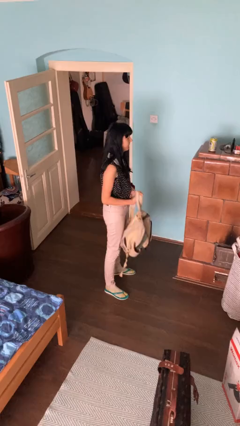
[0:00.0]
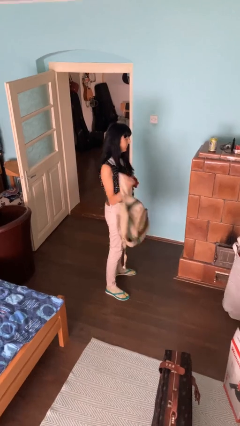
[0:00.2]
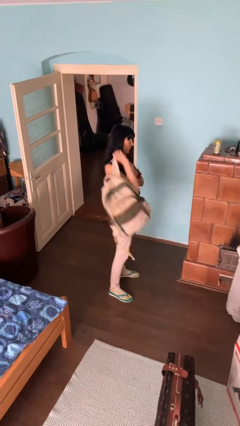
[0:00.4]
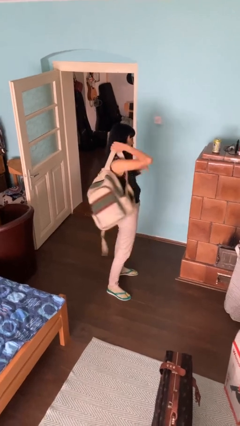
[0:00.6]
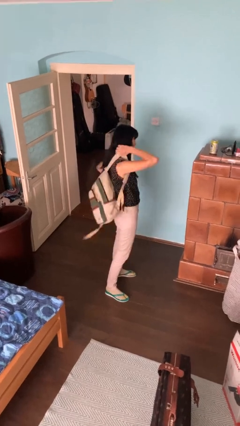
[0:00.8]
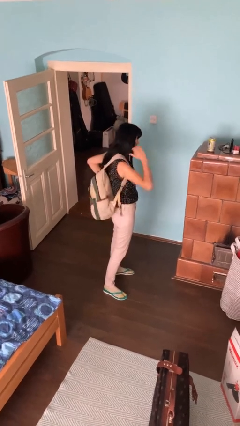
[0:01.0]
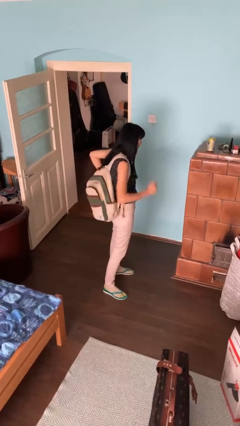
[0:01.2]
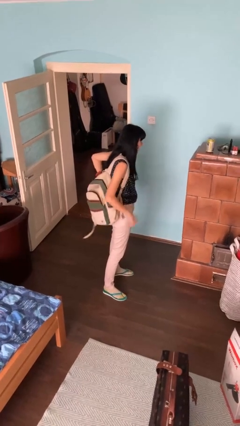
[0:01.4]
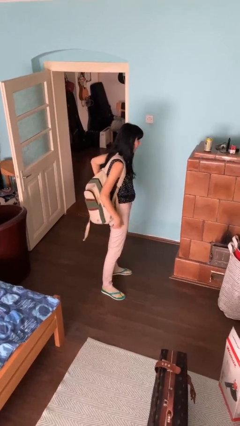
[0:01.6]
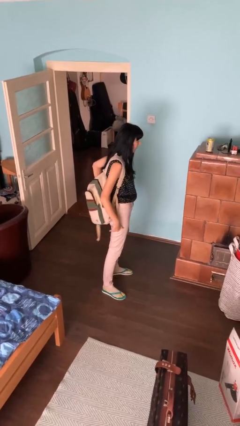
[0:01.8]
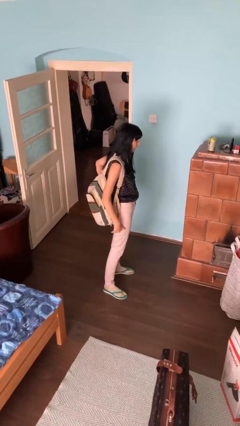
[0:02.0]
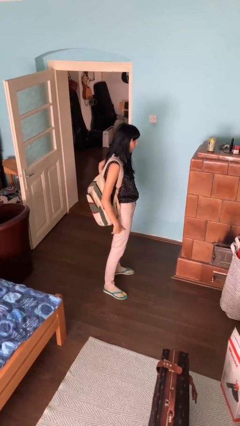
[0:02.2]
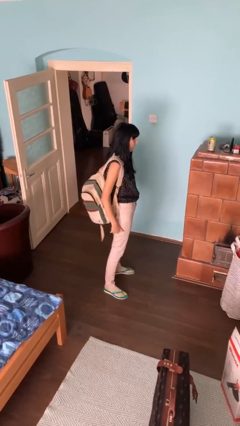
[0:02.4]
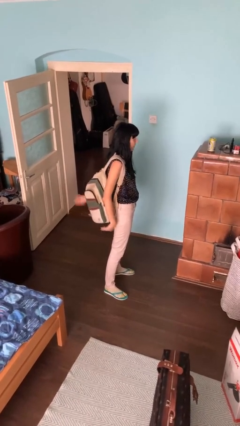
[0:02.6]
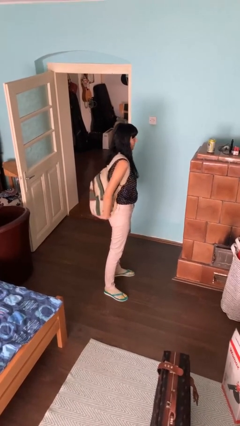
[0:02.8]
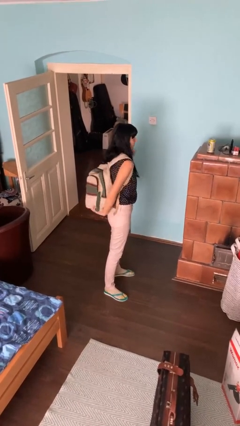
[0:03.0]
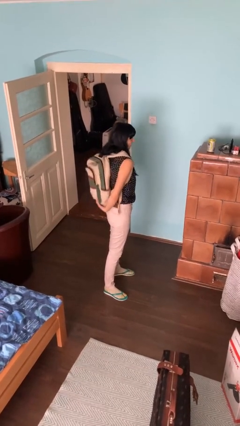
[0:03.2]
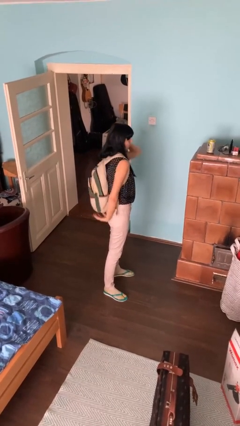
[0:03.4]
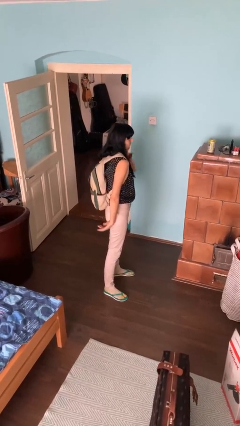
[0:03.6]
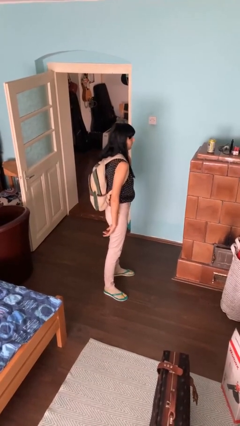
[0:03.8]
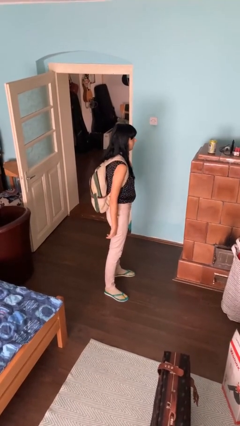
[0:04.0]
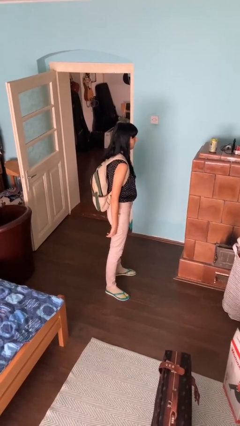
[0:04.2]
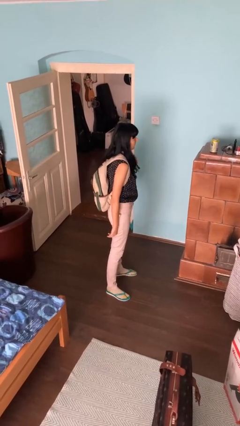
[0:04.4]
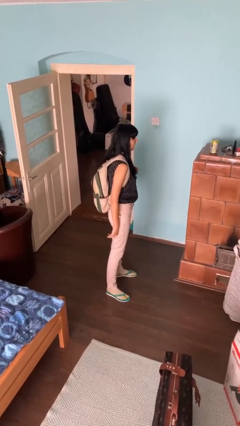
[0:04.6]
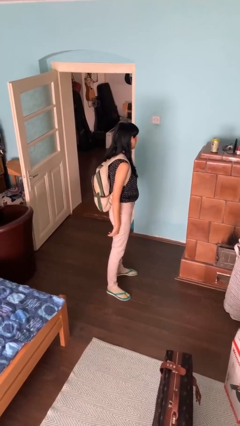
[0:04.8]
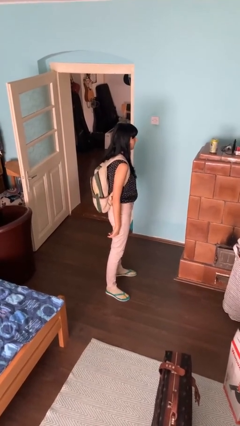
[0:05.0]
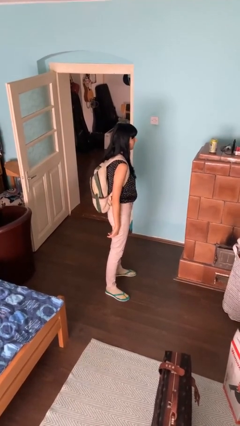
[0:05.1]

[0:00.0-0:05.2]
person puts on backpack

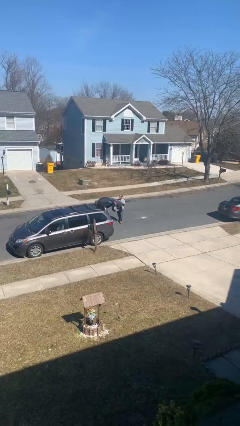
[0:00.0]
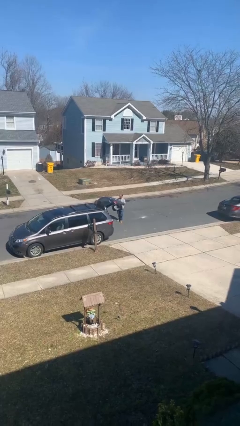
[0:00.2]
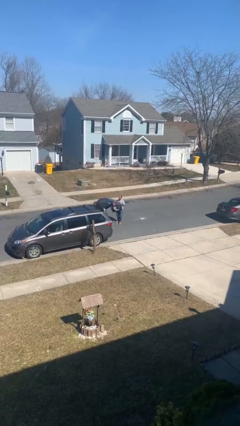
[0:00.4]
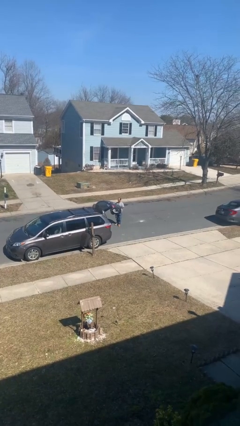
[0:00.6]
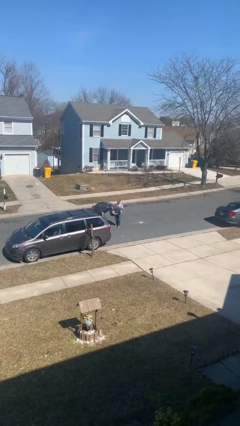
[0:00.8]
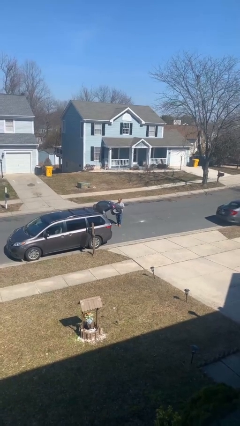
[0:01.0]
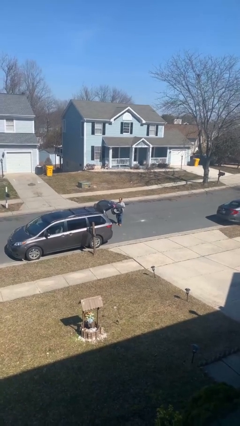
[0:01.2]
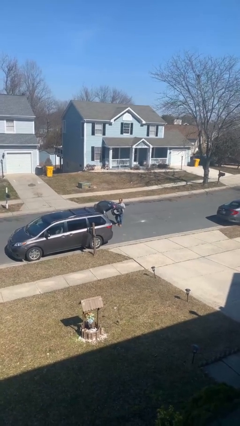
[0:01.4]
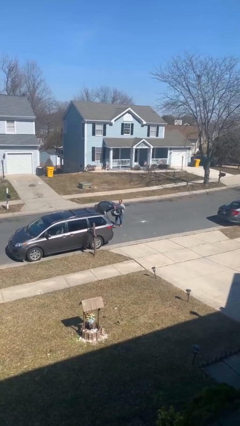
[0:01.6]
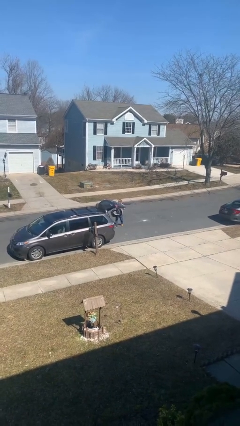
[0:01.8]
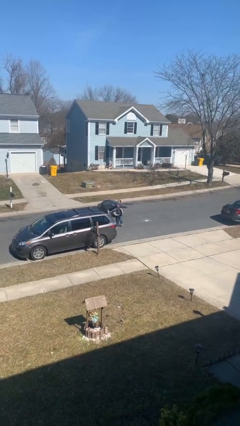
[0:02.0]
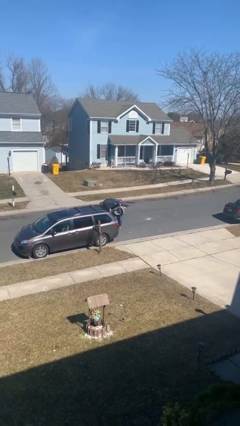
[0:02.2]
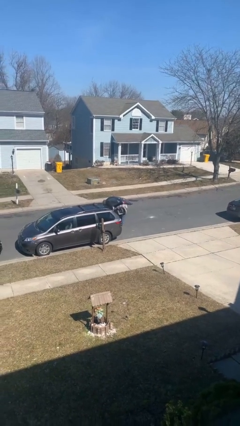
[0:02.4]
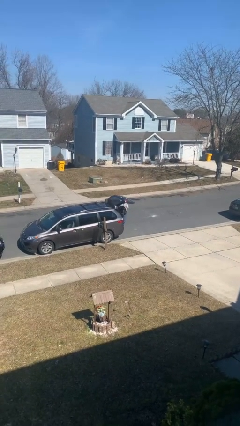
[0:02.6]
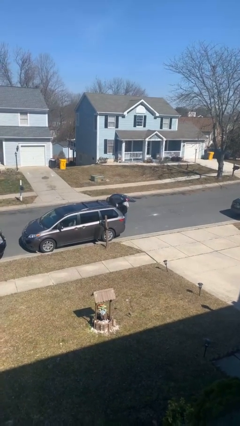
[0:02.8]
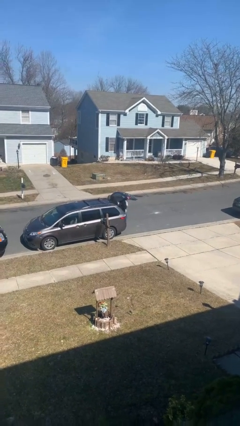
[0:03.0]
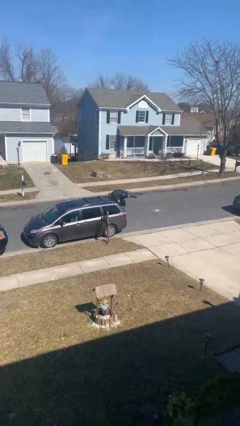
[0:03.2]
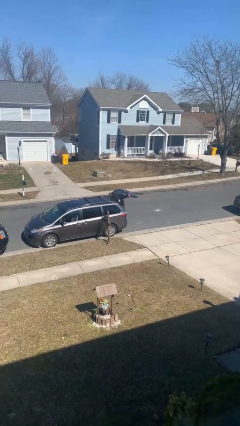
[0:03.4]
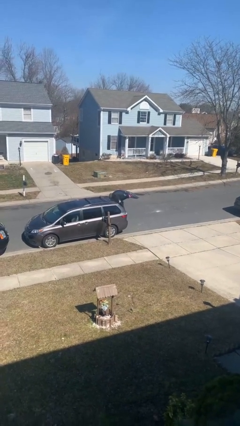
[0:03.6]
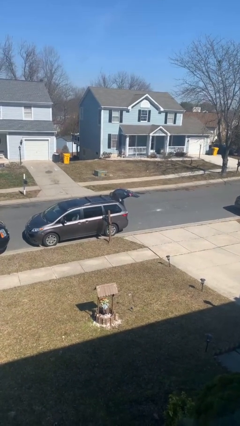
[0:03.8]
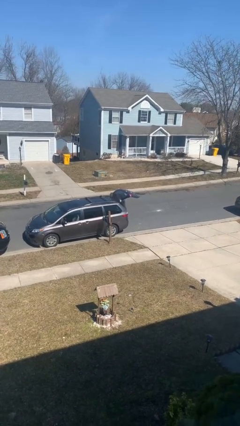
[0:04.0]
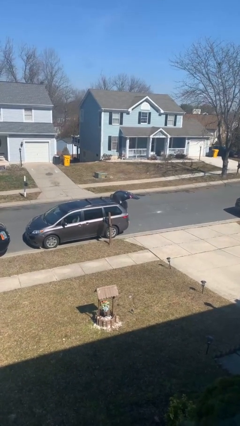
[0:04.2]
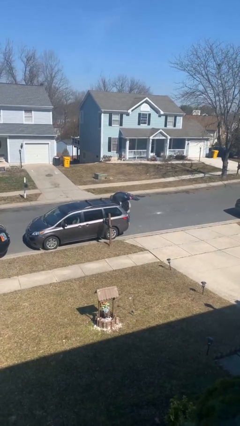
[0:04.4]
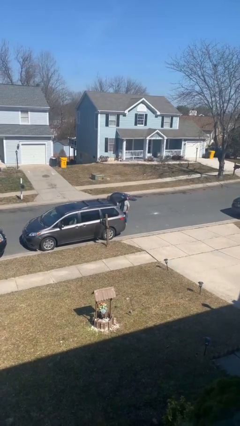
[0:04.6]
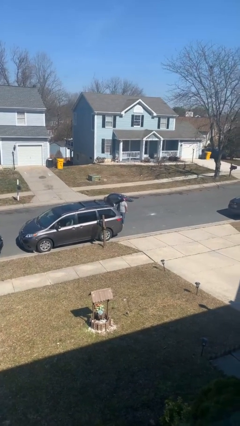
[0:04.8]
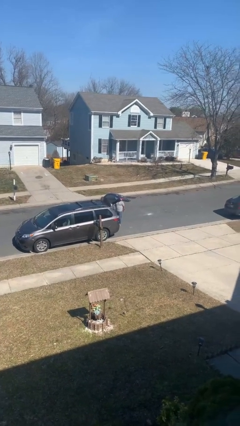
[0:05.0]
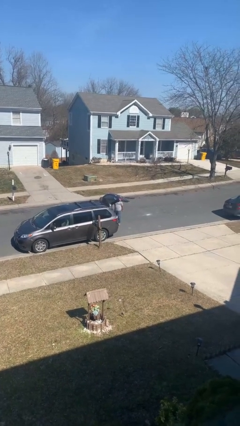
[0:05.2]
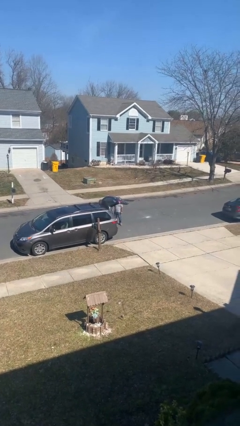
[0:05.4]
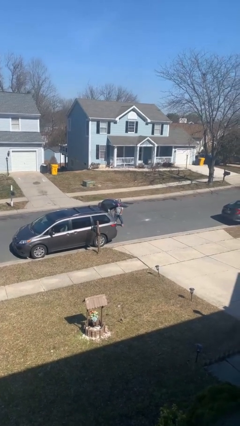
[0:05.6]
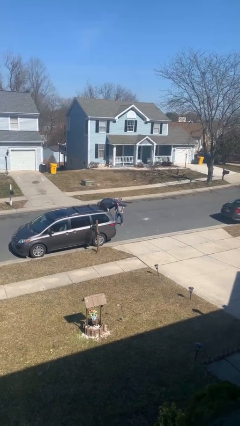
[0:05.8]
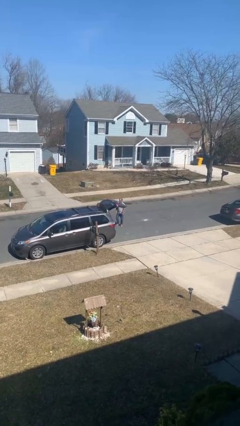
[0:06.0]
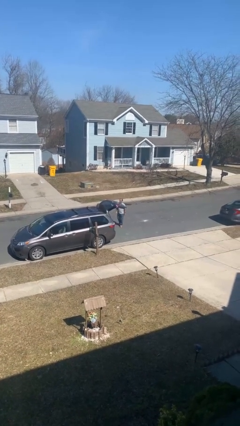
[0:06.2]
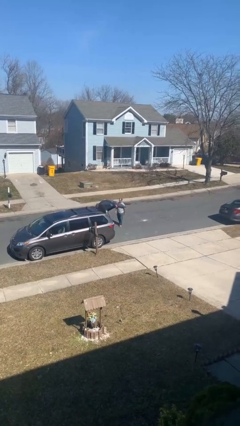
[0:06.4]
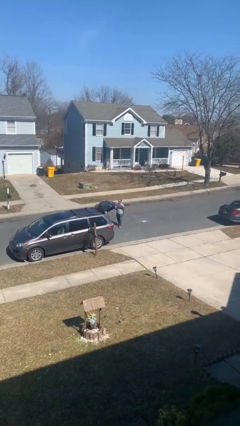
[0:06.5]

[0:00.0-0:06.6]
person loads car

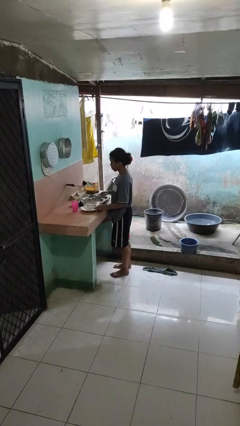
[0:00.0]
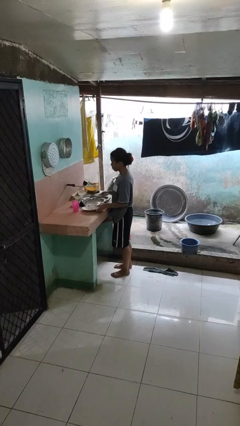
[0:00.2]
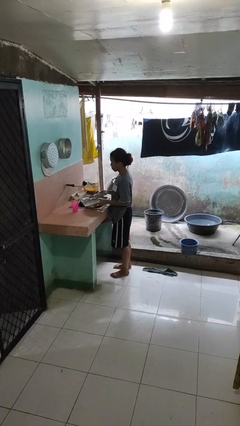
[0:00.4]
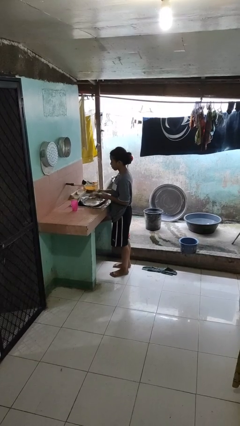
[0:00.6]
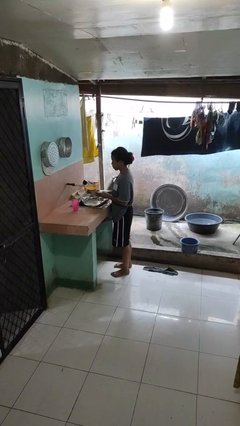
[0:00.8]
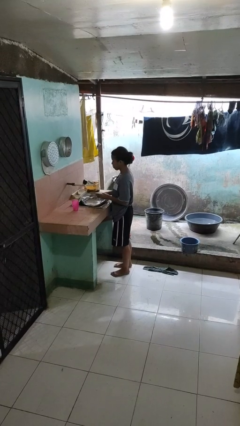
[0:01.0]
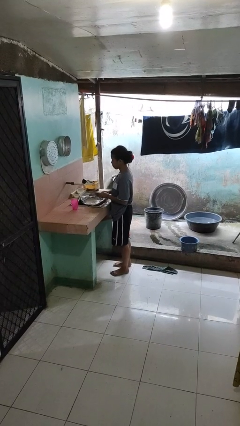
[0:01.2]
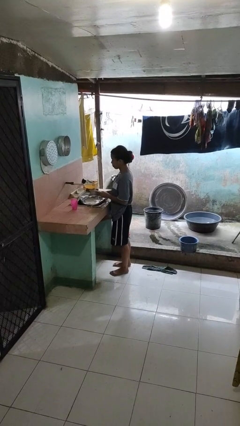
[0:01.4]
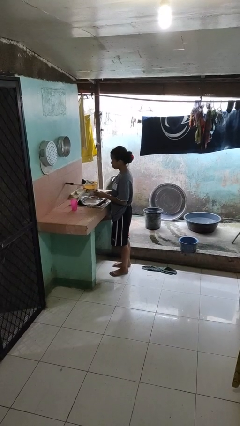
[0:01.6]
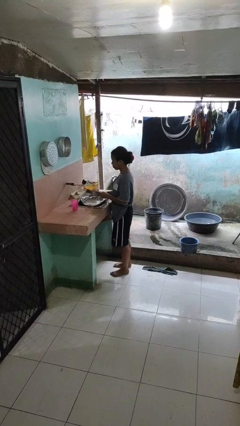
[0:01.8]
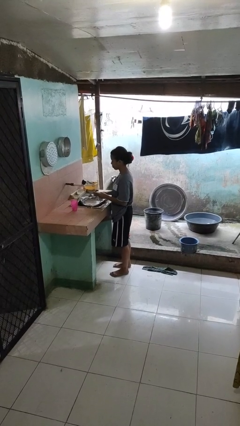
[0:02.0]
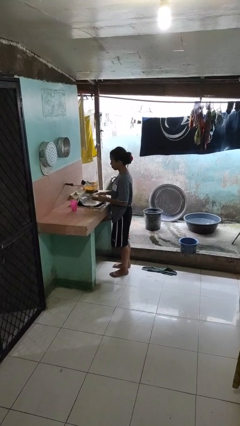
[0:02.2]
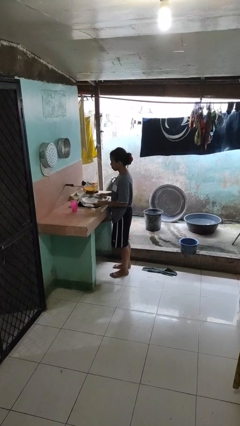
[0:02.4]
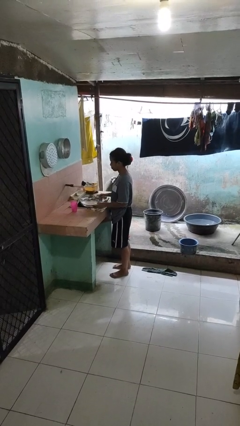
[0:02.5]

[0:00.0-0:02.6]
person washes dish

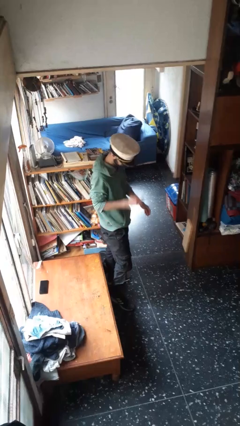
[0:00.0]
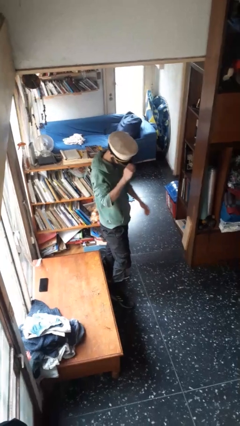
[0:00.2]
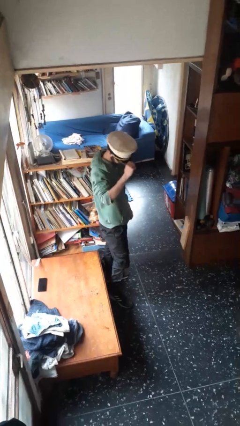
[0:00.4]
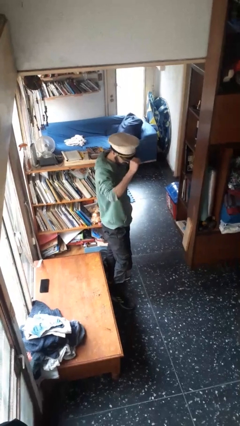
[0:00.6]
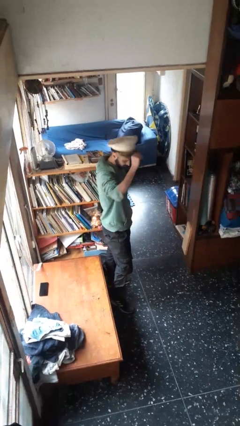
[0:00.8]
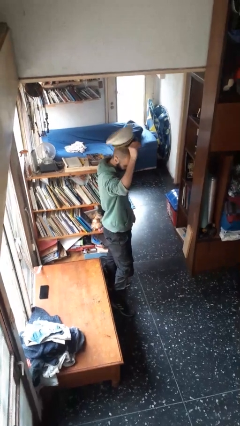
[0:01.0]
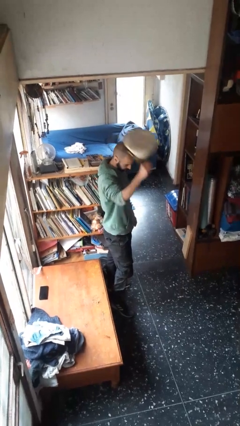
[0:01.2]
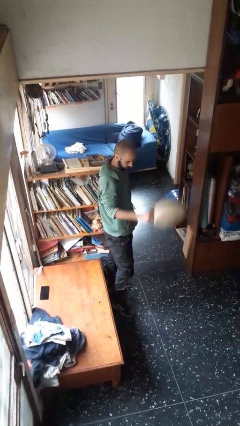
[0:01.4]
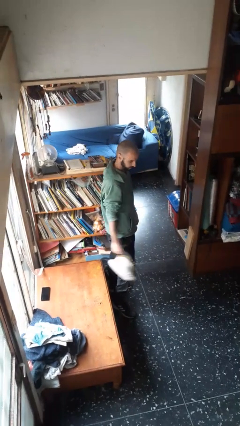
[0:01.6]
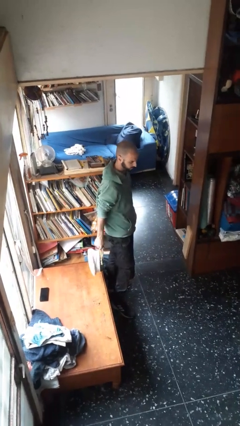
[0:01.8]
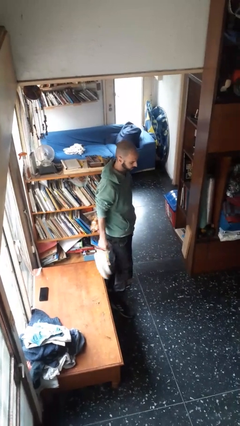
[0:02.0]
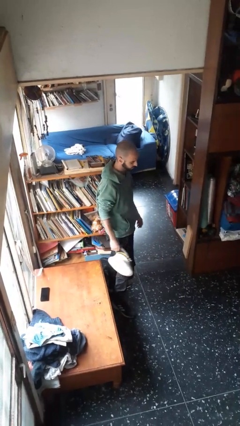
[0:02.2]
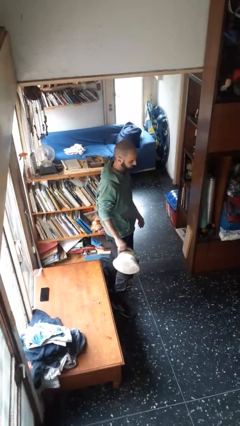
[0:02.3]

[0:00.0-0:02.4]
person takes off hat

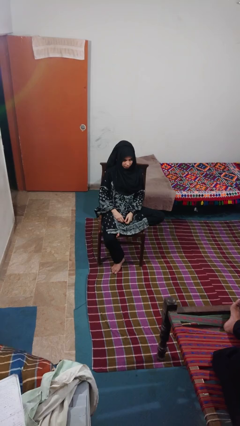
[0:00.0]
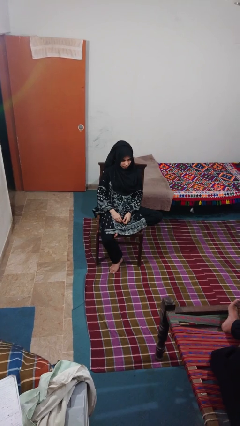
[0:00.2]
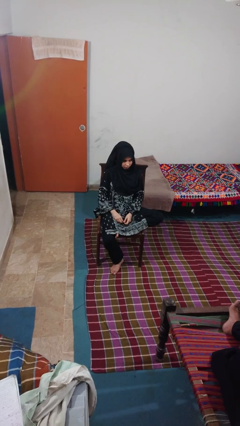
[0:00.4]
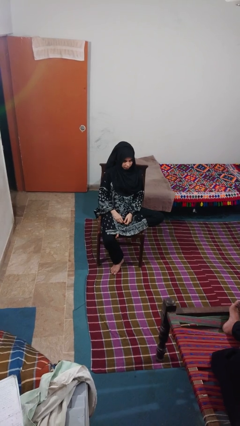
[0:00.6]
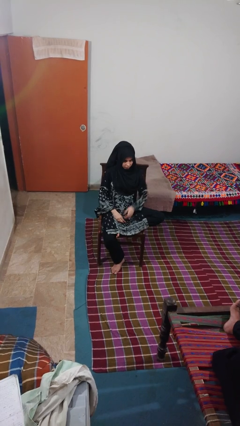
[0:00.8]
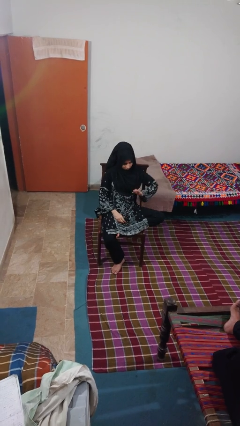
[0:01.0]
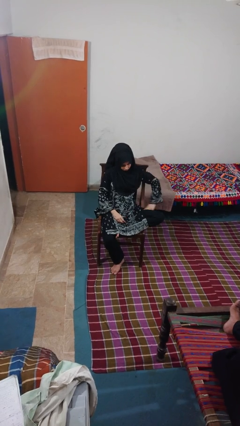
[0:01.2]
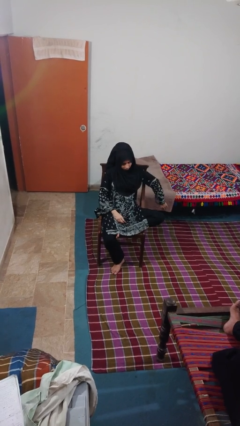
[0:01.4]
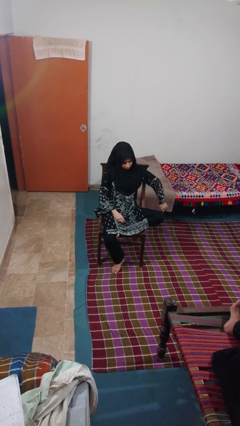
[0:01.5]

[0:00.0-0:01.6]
person swats bug
